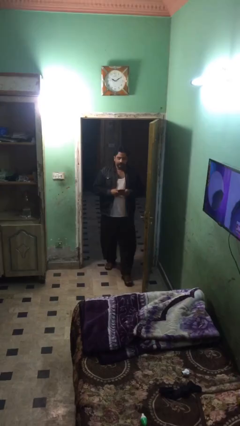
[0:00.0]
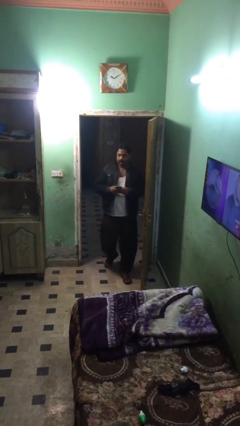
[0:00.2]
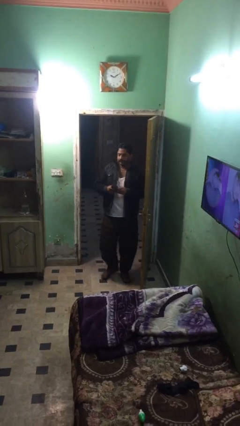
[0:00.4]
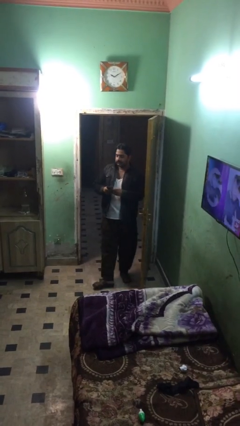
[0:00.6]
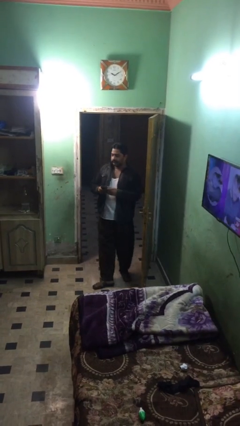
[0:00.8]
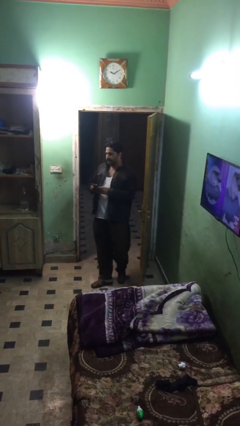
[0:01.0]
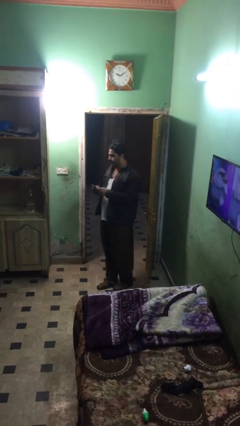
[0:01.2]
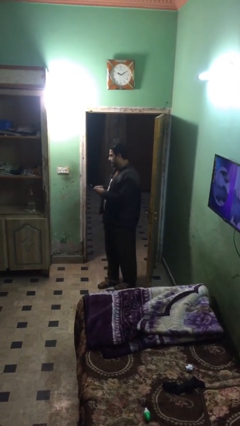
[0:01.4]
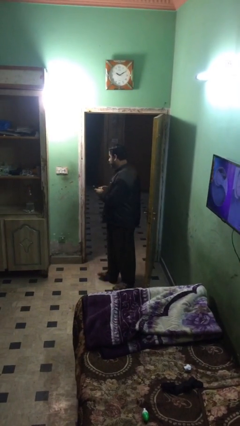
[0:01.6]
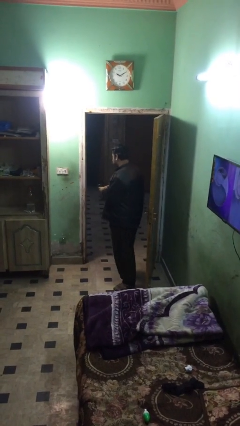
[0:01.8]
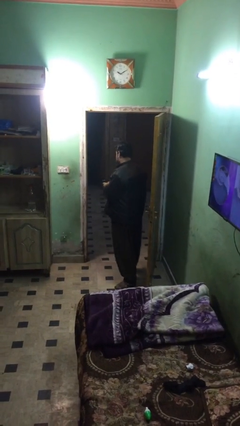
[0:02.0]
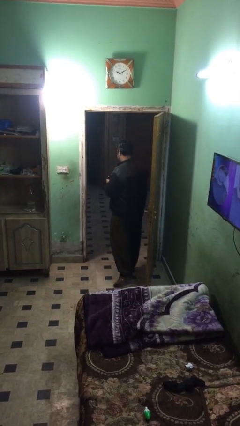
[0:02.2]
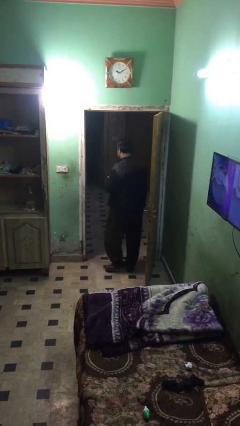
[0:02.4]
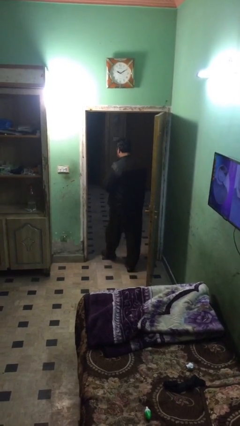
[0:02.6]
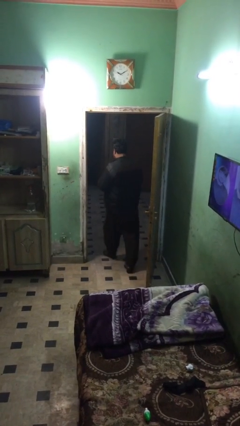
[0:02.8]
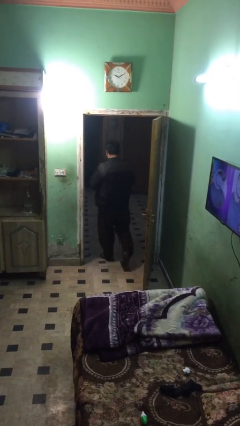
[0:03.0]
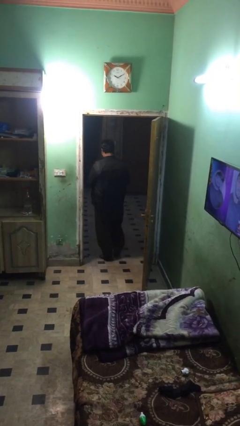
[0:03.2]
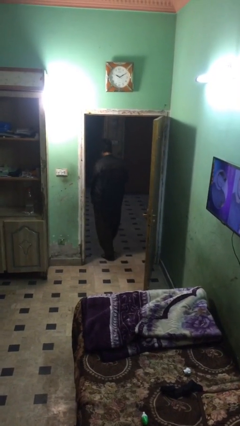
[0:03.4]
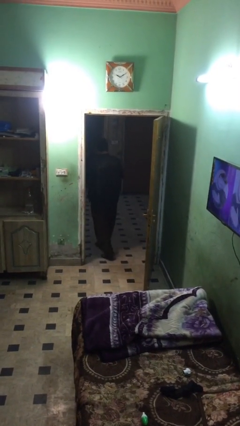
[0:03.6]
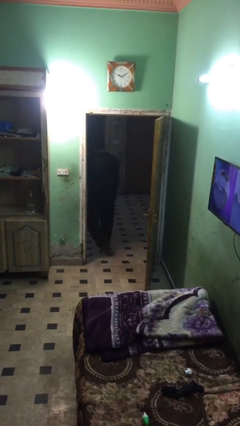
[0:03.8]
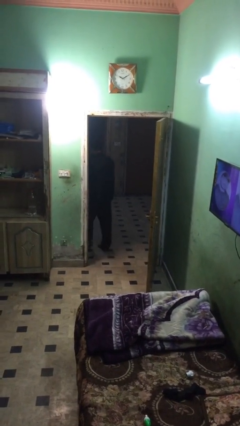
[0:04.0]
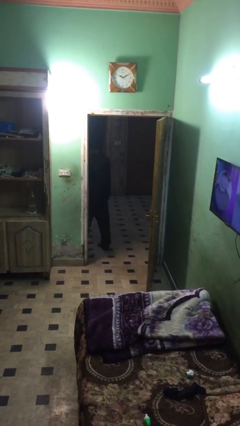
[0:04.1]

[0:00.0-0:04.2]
person exits scene through structure

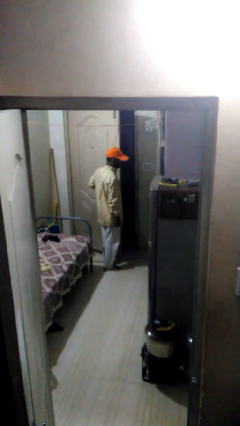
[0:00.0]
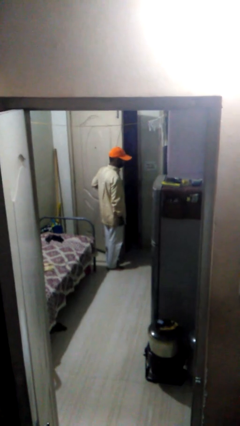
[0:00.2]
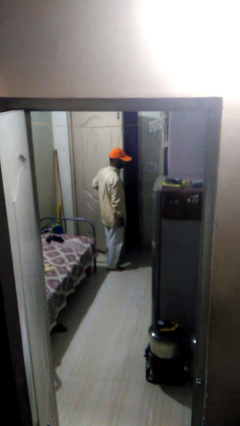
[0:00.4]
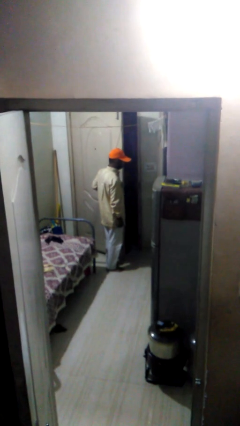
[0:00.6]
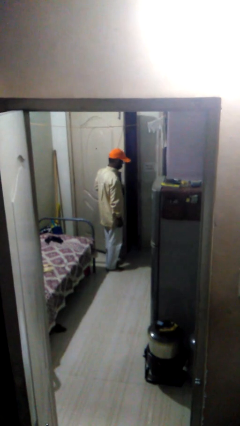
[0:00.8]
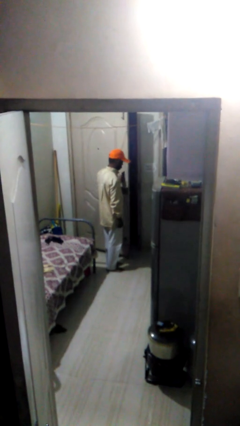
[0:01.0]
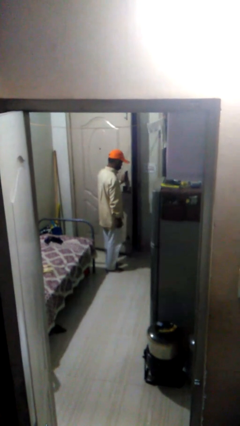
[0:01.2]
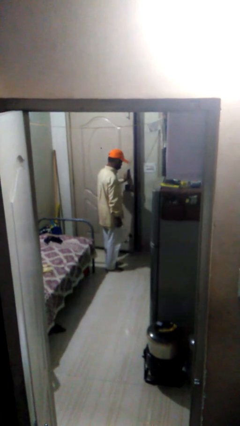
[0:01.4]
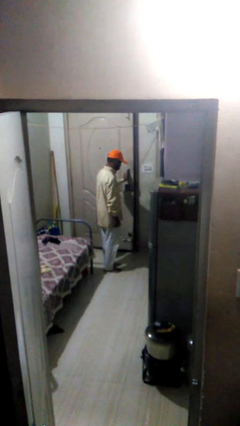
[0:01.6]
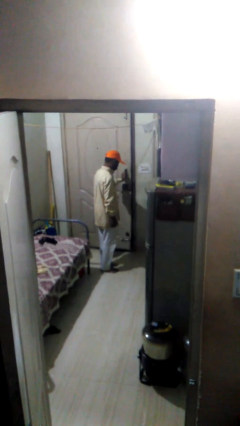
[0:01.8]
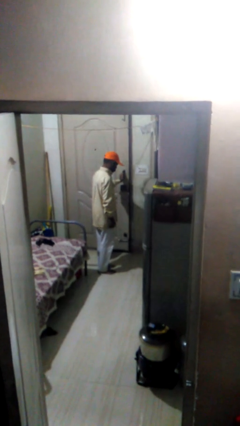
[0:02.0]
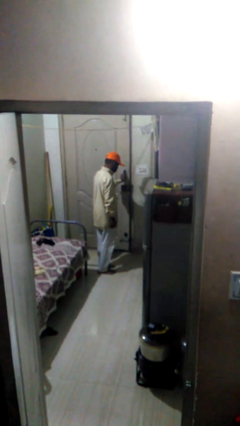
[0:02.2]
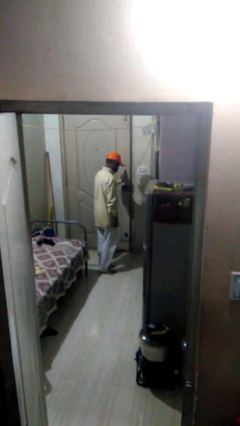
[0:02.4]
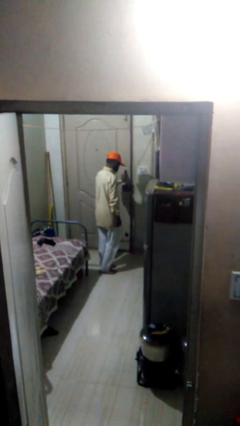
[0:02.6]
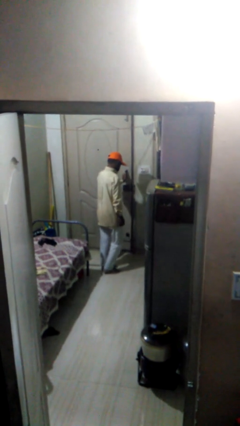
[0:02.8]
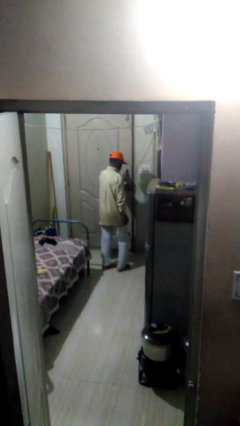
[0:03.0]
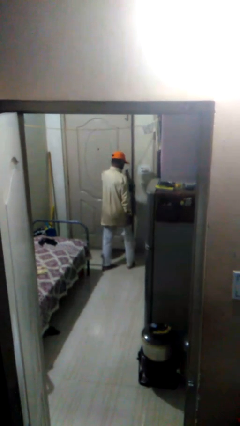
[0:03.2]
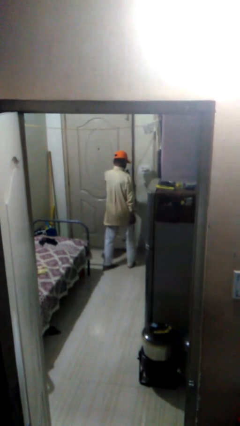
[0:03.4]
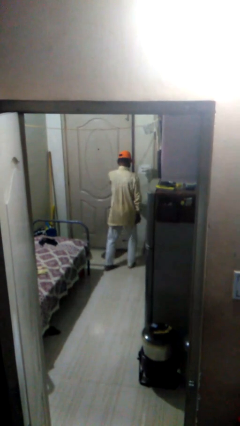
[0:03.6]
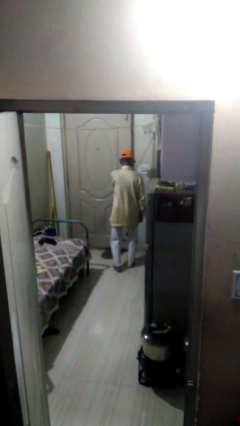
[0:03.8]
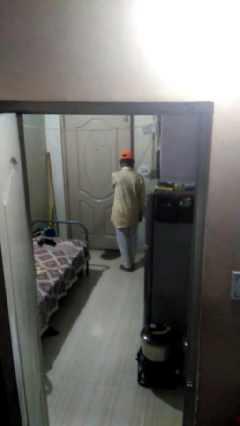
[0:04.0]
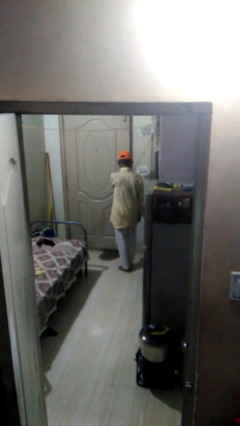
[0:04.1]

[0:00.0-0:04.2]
person closes facility door

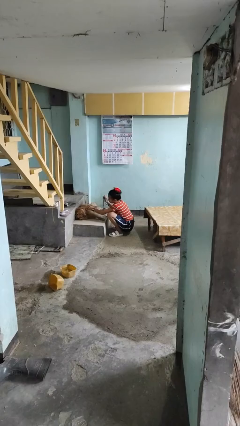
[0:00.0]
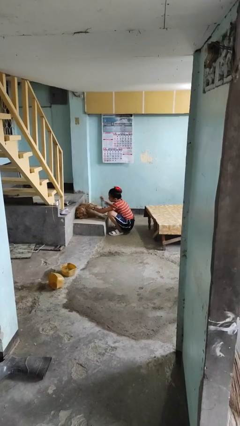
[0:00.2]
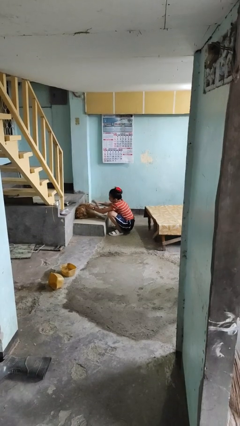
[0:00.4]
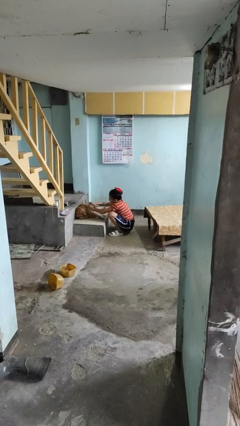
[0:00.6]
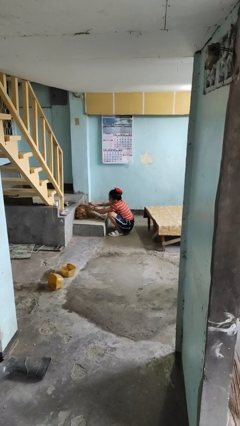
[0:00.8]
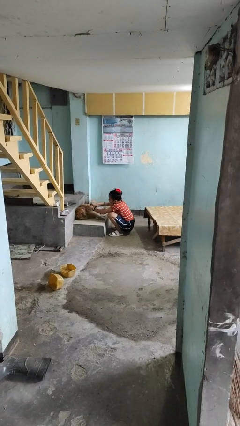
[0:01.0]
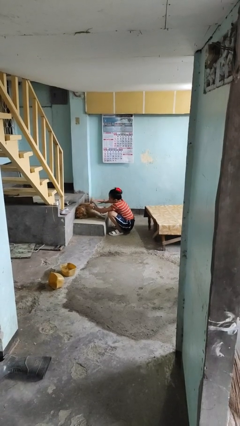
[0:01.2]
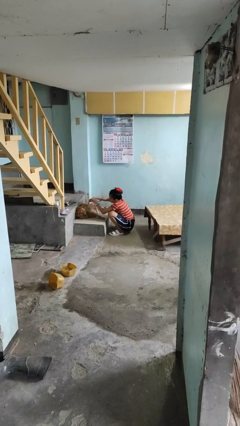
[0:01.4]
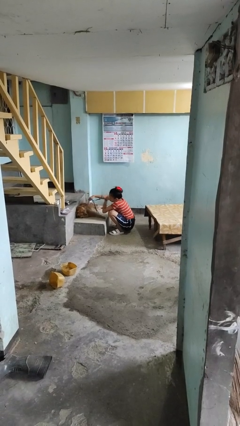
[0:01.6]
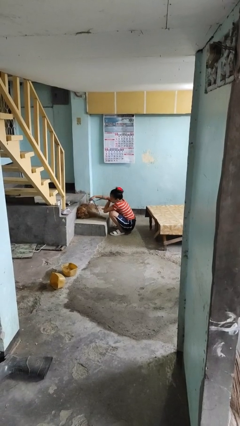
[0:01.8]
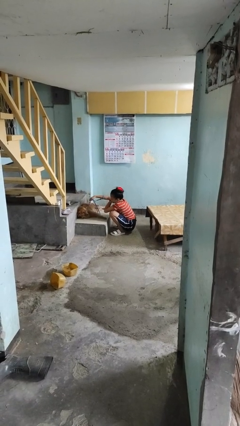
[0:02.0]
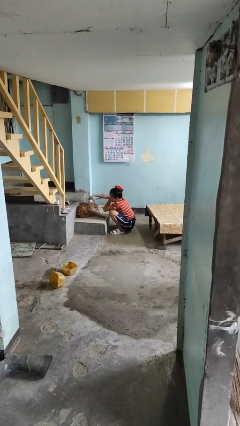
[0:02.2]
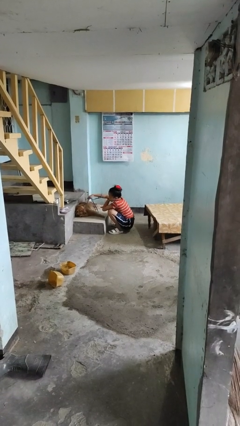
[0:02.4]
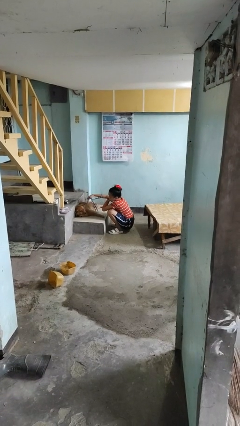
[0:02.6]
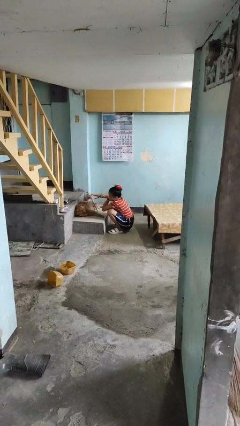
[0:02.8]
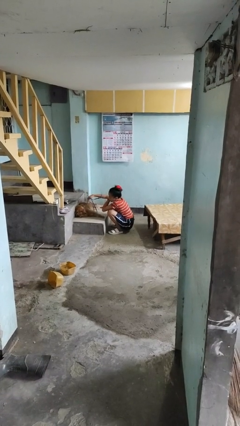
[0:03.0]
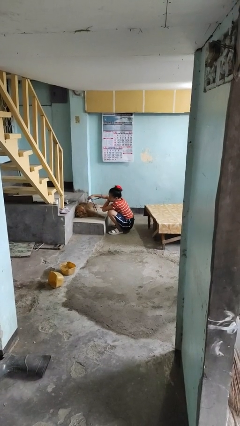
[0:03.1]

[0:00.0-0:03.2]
person attaches leash to dog

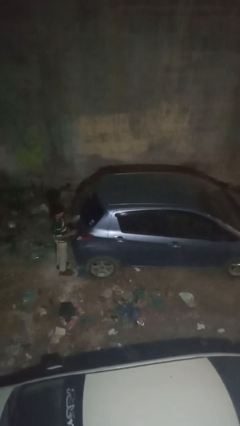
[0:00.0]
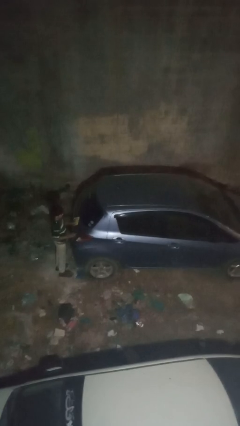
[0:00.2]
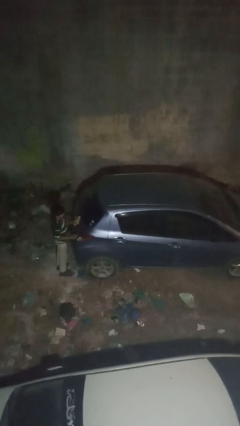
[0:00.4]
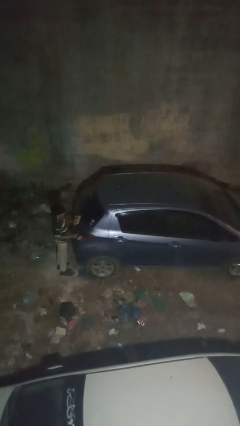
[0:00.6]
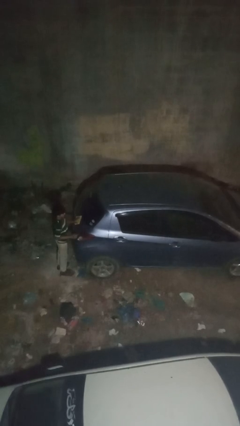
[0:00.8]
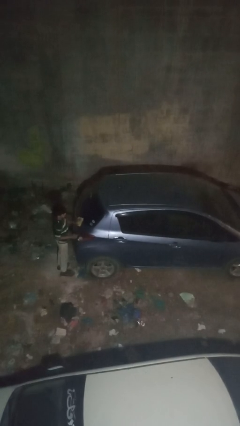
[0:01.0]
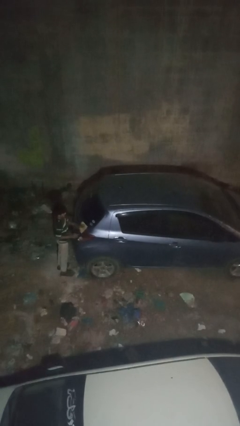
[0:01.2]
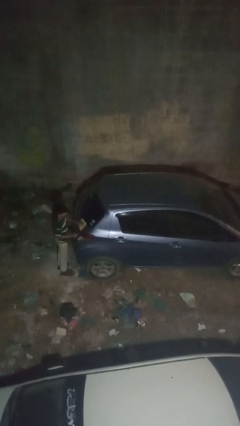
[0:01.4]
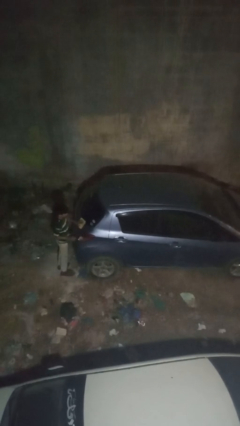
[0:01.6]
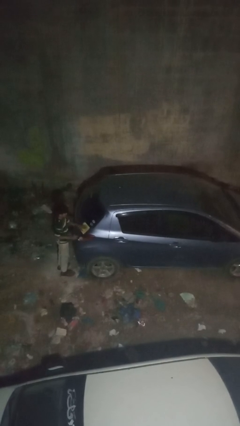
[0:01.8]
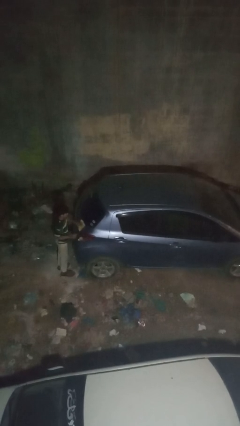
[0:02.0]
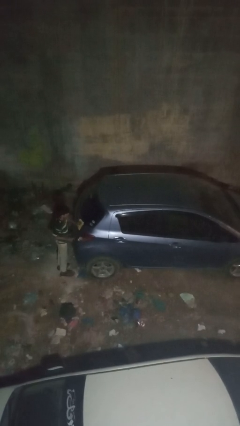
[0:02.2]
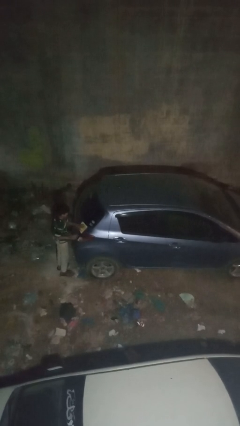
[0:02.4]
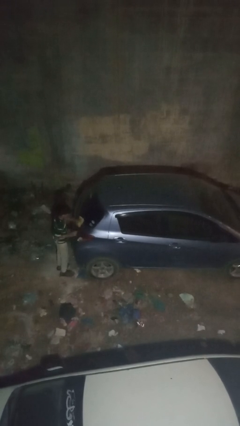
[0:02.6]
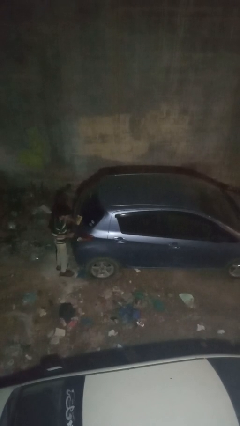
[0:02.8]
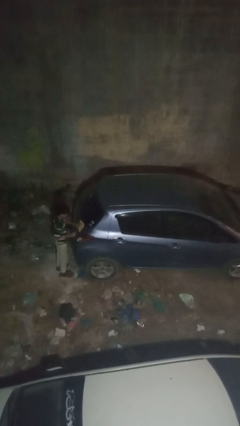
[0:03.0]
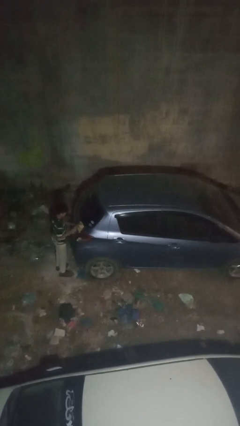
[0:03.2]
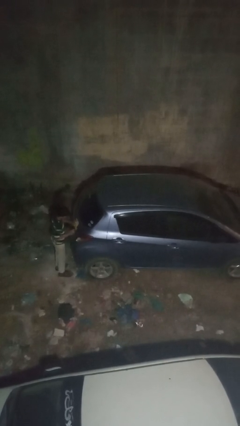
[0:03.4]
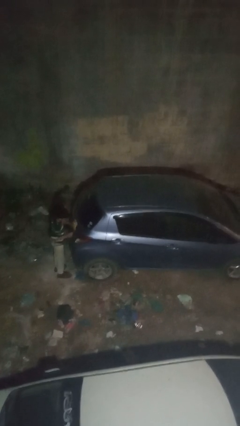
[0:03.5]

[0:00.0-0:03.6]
person polishes car with rag

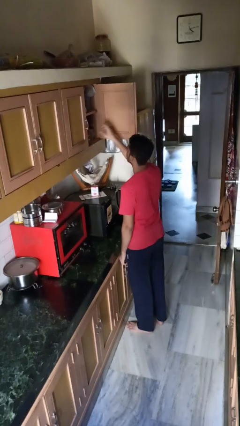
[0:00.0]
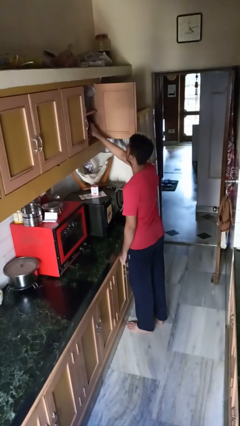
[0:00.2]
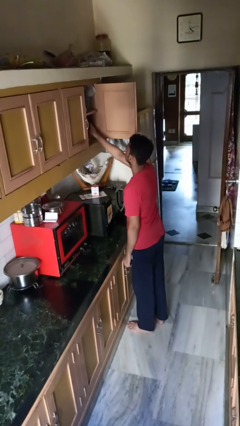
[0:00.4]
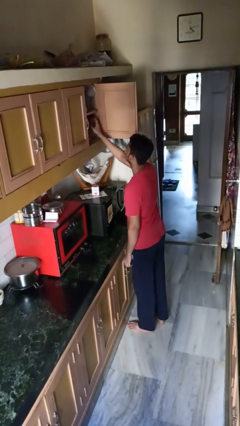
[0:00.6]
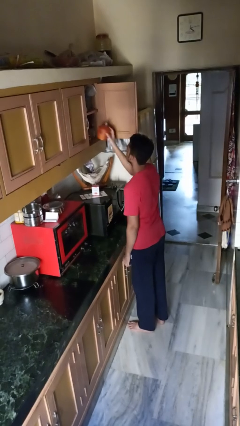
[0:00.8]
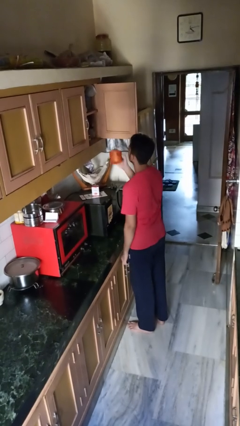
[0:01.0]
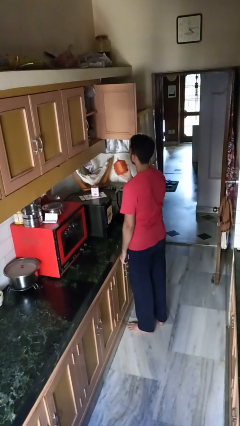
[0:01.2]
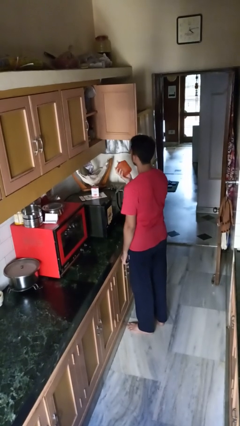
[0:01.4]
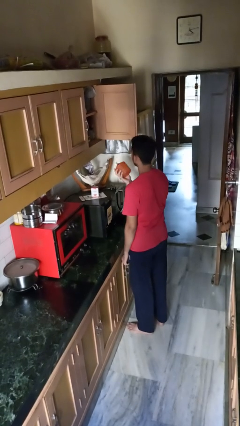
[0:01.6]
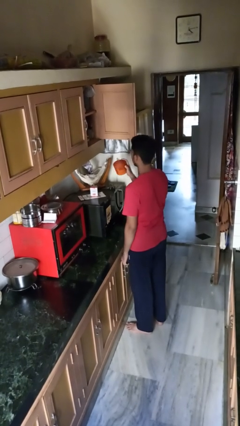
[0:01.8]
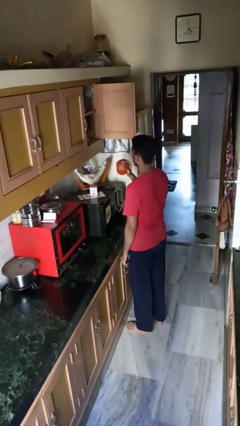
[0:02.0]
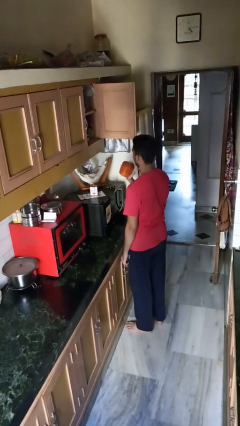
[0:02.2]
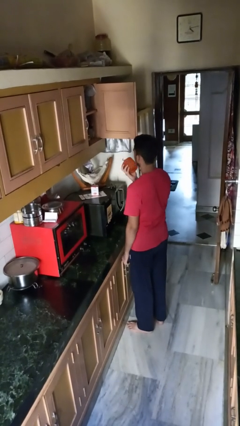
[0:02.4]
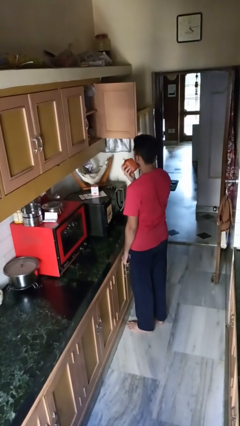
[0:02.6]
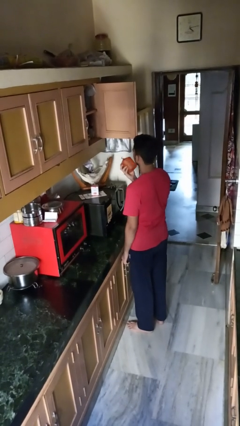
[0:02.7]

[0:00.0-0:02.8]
person takes object from cabinet
